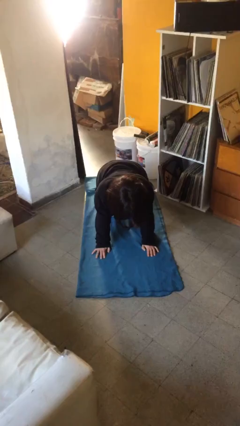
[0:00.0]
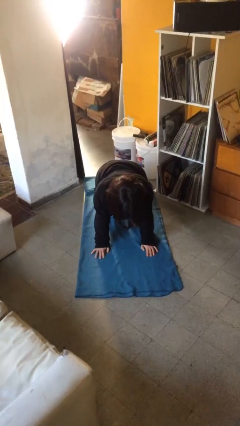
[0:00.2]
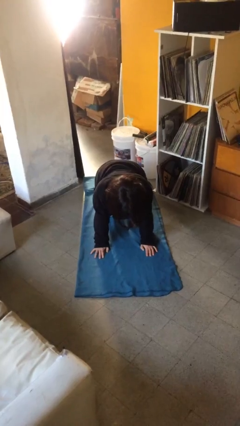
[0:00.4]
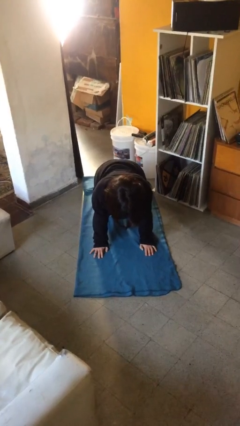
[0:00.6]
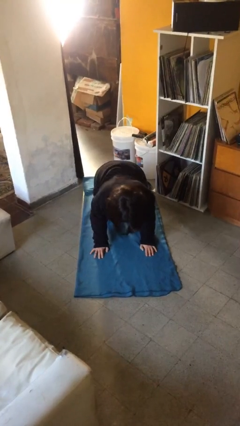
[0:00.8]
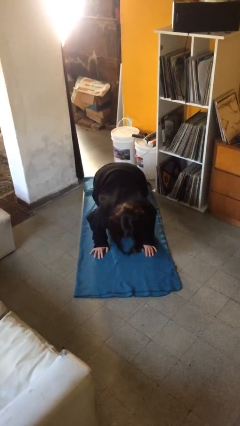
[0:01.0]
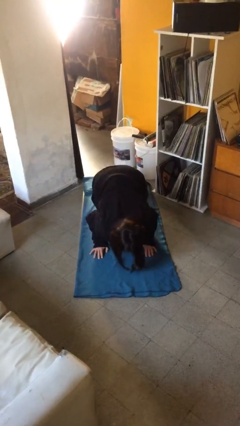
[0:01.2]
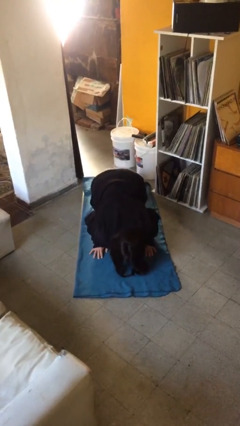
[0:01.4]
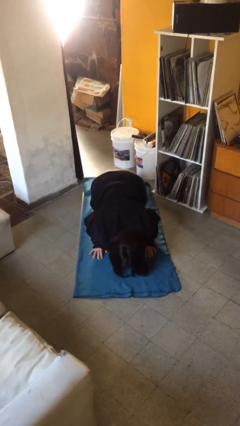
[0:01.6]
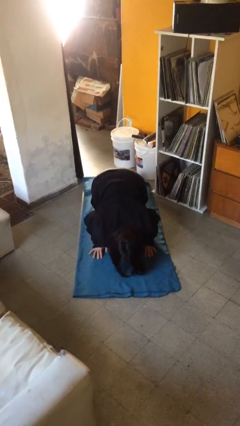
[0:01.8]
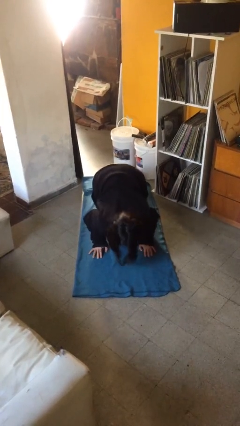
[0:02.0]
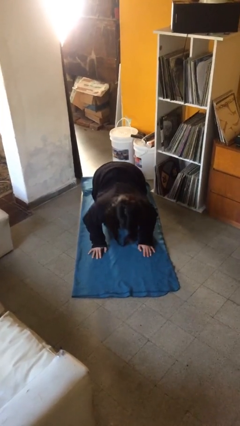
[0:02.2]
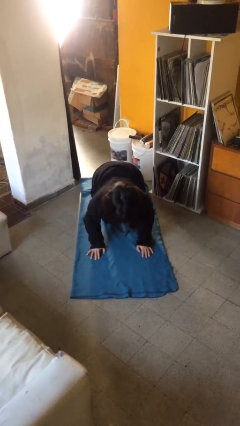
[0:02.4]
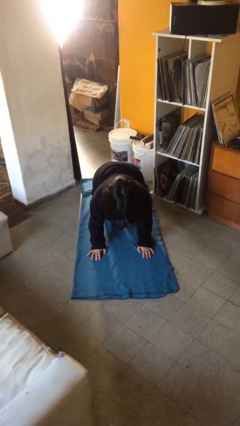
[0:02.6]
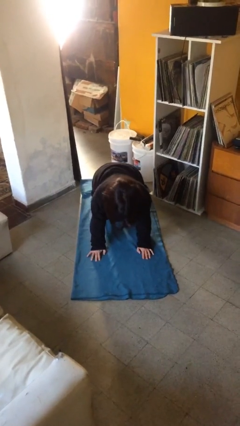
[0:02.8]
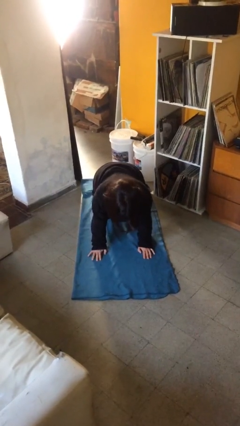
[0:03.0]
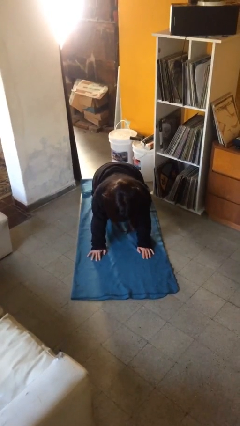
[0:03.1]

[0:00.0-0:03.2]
person exercises with pushup

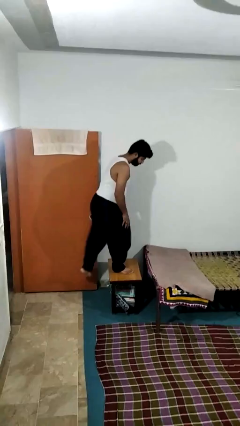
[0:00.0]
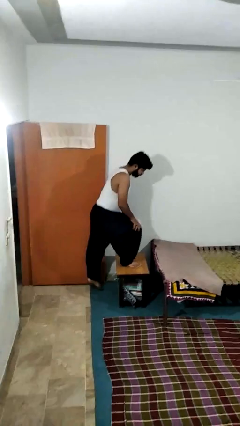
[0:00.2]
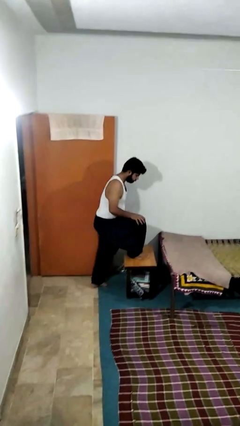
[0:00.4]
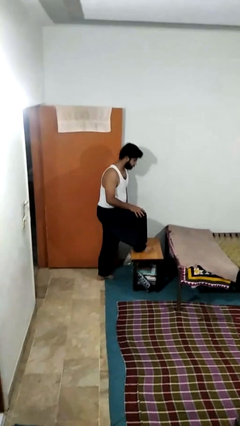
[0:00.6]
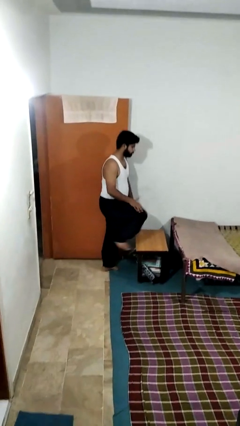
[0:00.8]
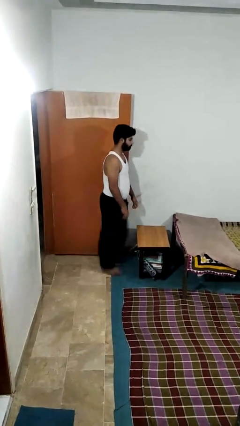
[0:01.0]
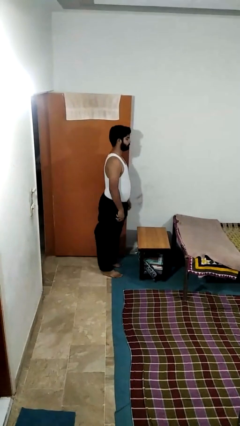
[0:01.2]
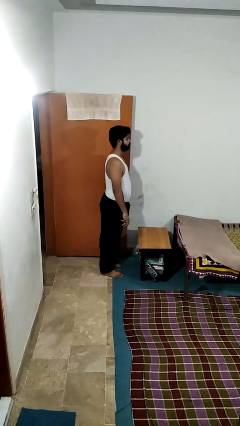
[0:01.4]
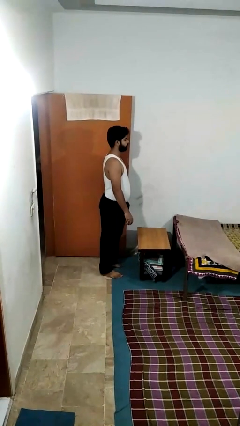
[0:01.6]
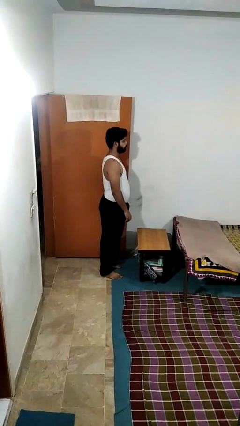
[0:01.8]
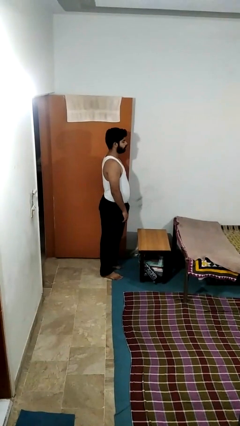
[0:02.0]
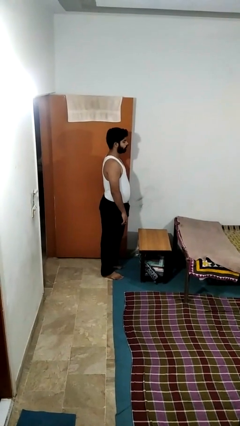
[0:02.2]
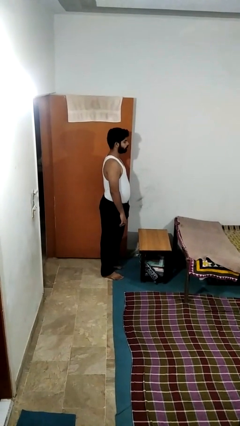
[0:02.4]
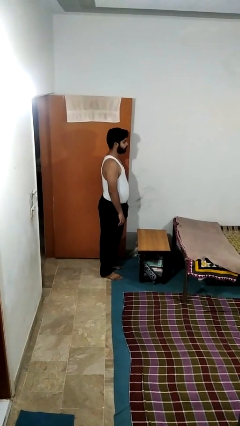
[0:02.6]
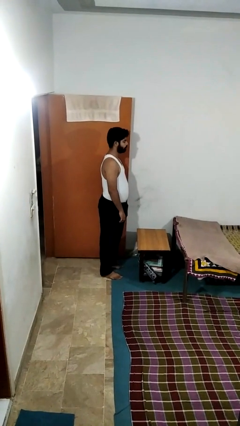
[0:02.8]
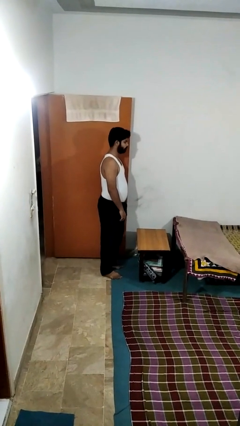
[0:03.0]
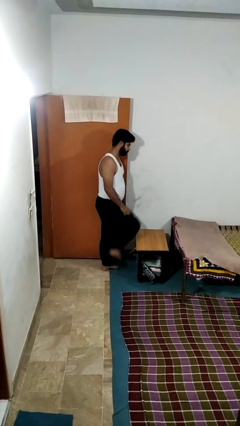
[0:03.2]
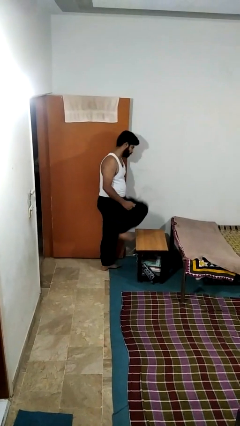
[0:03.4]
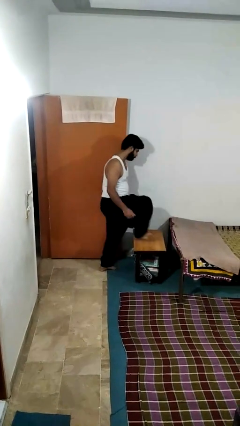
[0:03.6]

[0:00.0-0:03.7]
person climbs off table

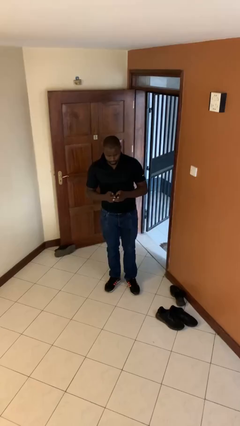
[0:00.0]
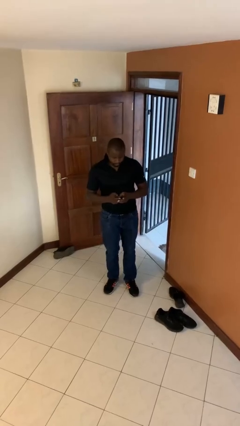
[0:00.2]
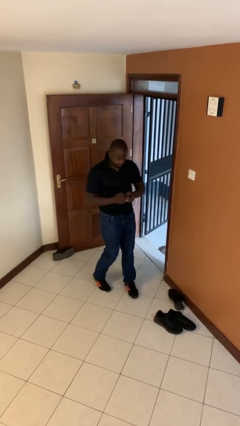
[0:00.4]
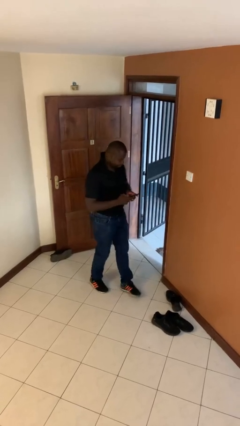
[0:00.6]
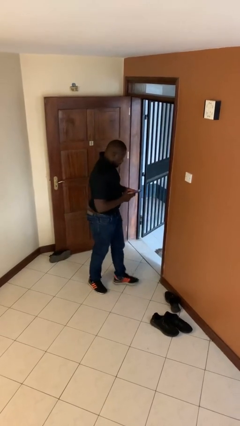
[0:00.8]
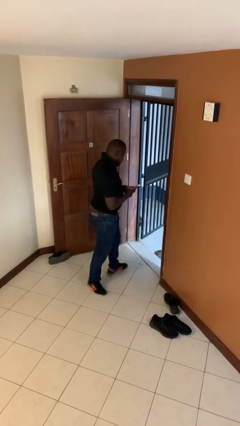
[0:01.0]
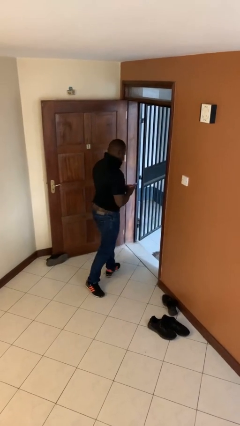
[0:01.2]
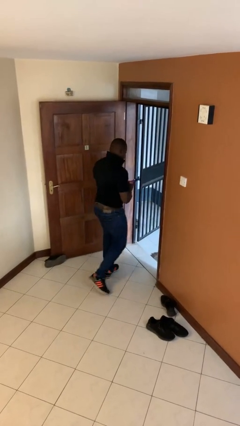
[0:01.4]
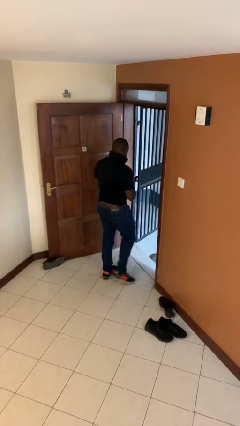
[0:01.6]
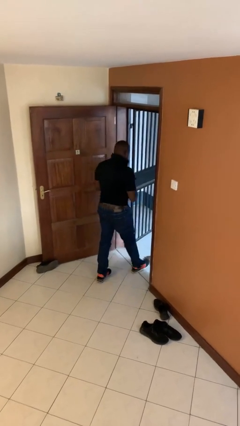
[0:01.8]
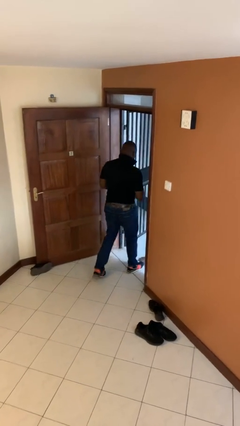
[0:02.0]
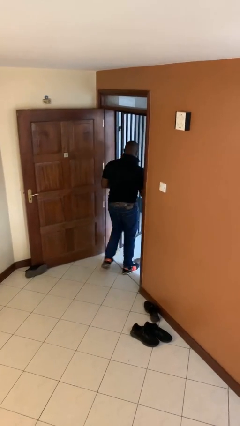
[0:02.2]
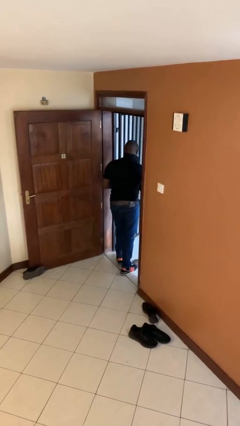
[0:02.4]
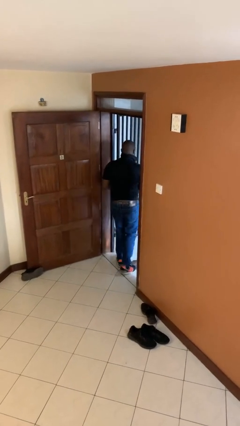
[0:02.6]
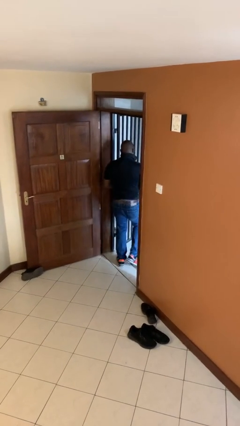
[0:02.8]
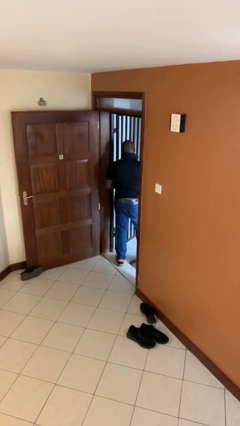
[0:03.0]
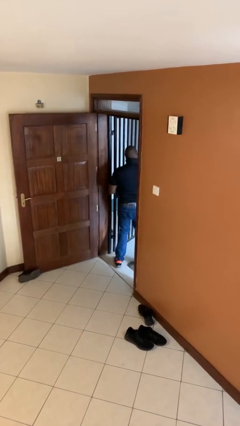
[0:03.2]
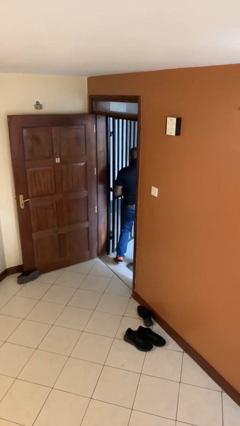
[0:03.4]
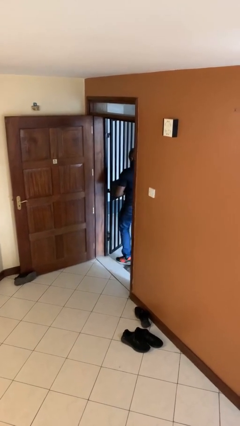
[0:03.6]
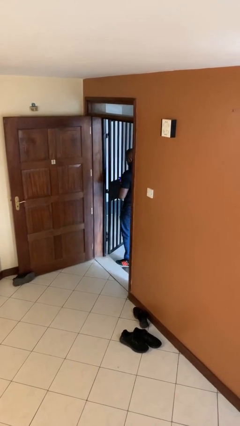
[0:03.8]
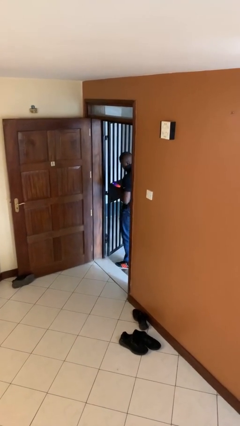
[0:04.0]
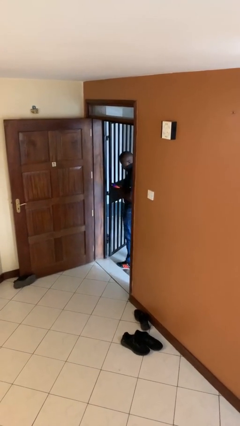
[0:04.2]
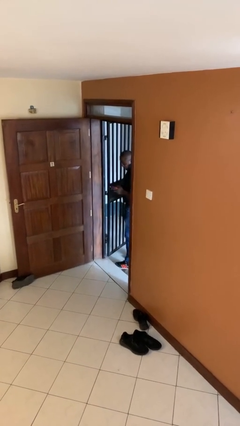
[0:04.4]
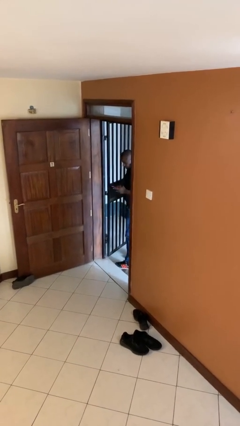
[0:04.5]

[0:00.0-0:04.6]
person exits scene through structure

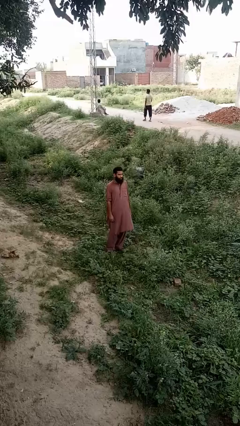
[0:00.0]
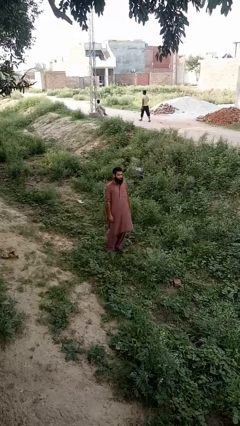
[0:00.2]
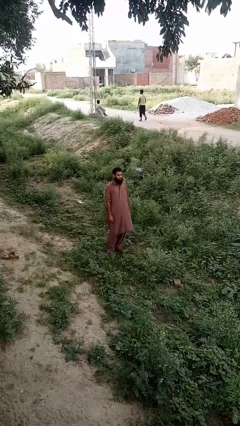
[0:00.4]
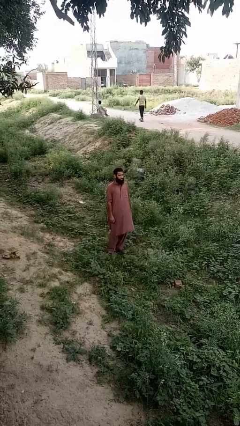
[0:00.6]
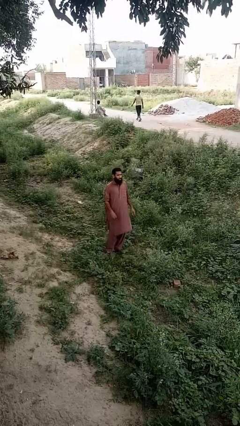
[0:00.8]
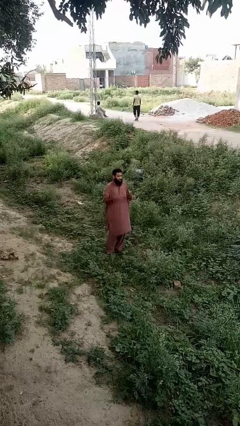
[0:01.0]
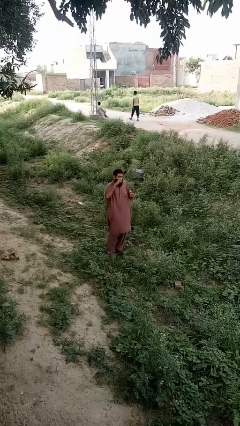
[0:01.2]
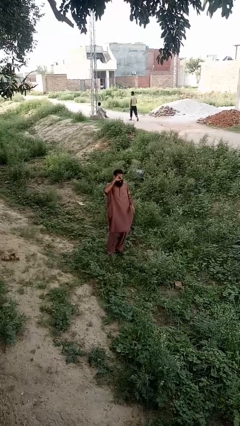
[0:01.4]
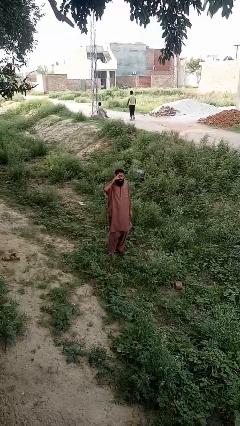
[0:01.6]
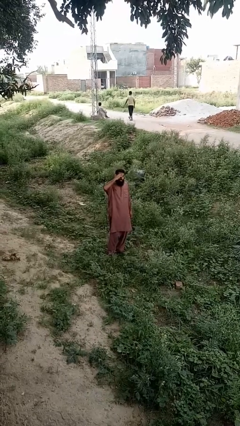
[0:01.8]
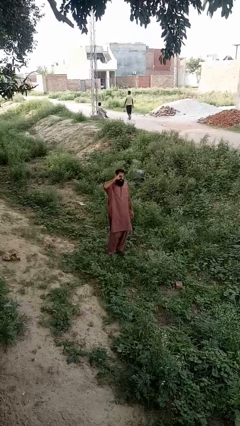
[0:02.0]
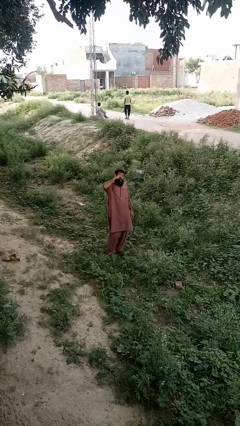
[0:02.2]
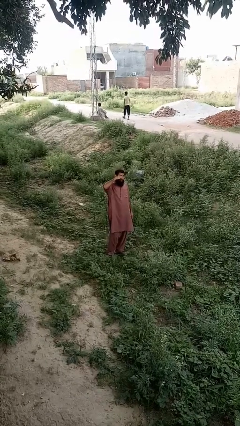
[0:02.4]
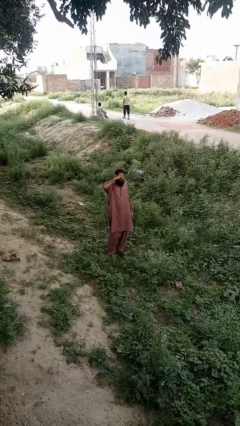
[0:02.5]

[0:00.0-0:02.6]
person rubs eyes

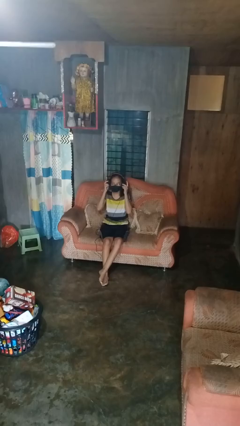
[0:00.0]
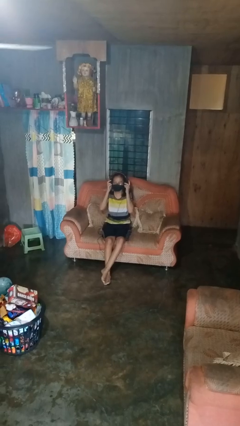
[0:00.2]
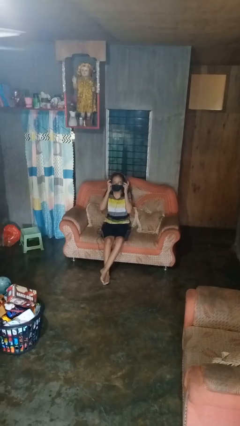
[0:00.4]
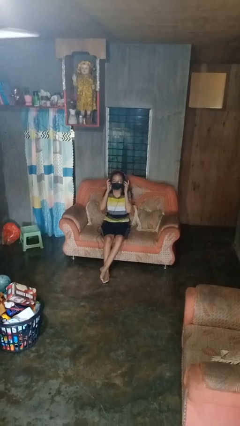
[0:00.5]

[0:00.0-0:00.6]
person puts on headphones

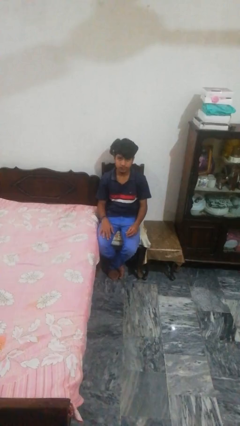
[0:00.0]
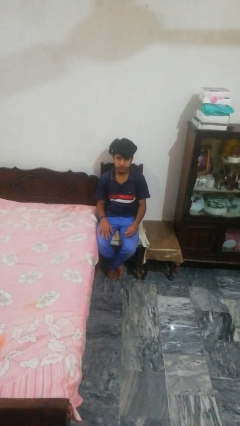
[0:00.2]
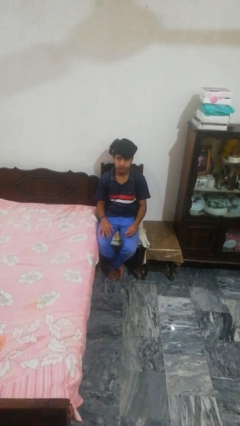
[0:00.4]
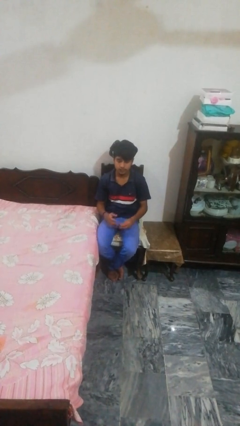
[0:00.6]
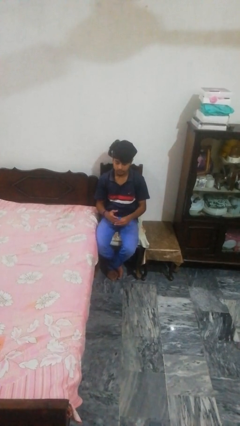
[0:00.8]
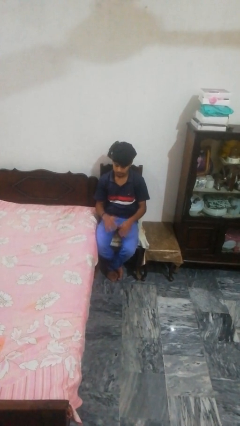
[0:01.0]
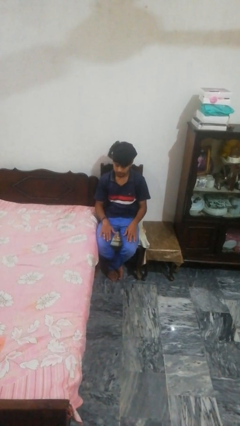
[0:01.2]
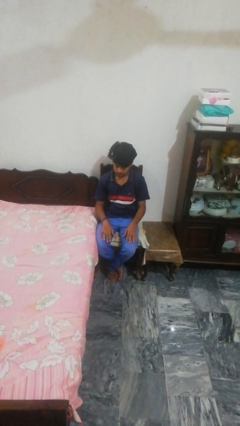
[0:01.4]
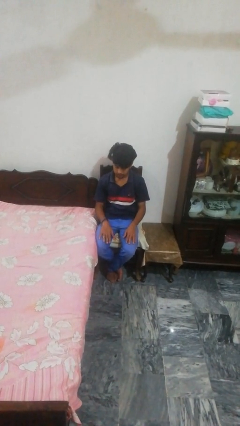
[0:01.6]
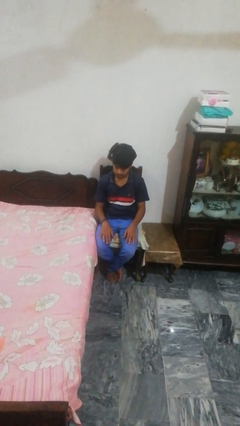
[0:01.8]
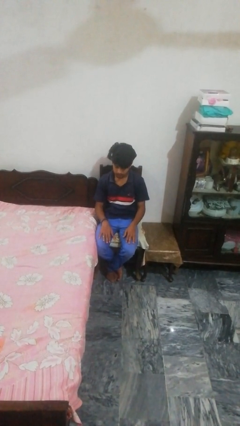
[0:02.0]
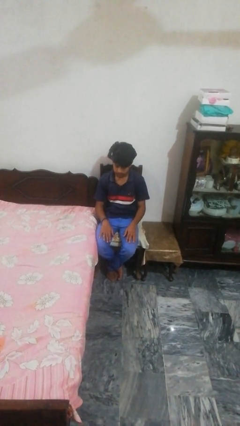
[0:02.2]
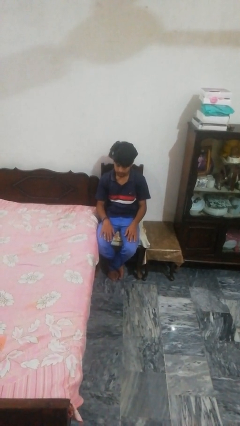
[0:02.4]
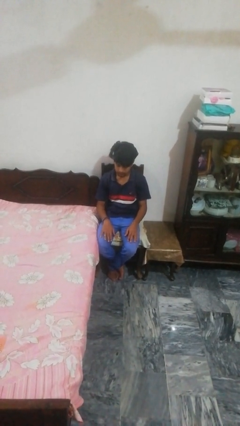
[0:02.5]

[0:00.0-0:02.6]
person puts on ring

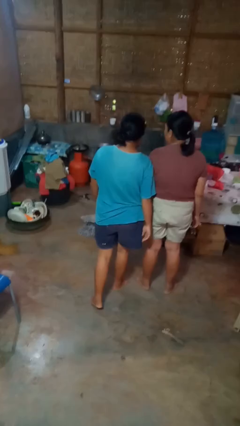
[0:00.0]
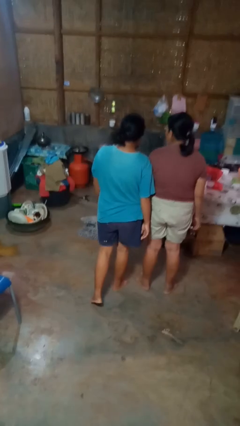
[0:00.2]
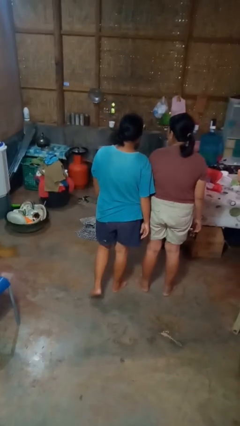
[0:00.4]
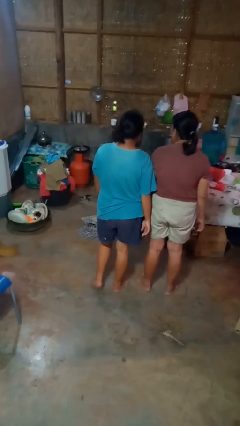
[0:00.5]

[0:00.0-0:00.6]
person bumps into person
